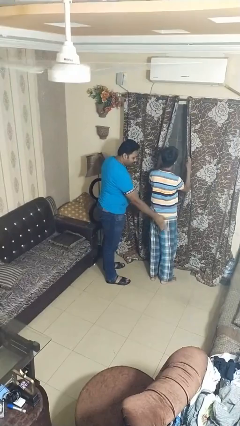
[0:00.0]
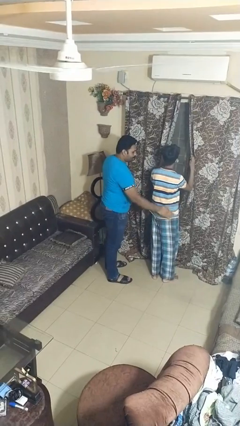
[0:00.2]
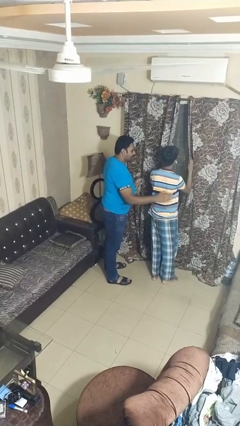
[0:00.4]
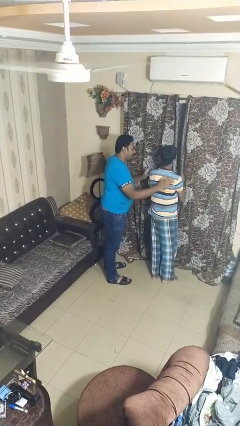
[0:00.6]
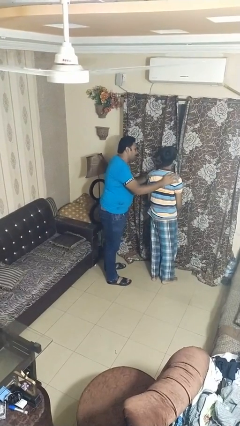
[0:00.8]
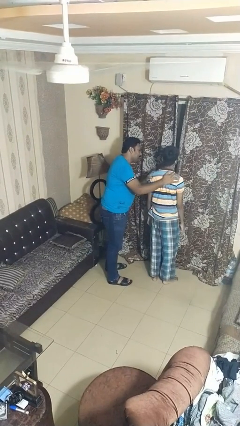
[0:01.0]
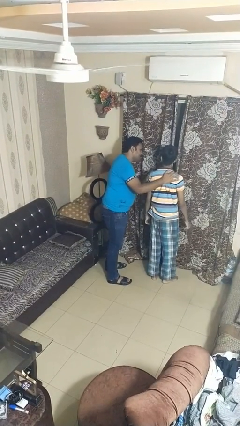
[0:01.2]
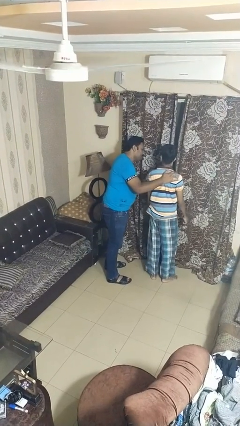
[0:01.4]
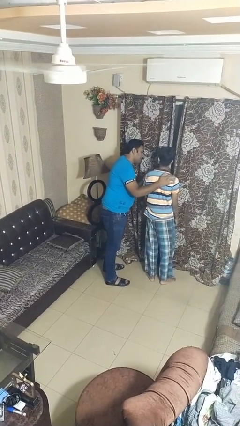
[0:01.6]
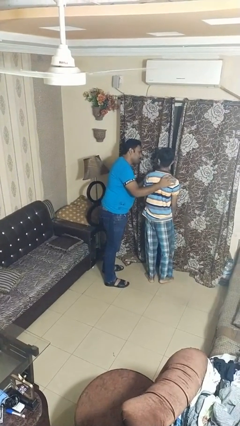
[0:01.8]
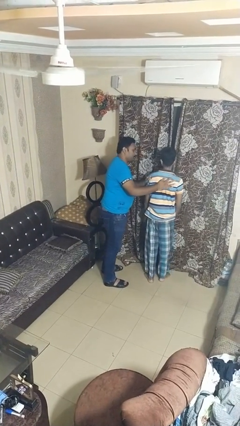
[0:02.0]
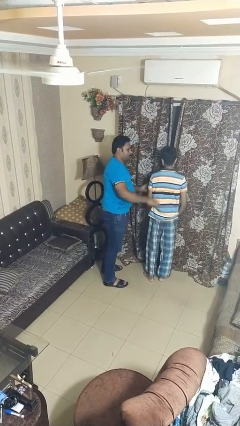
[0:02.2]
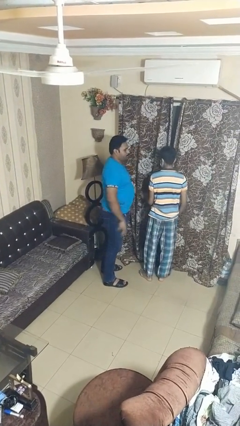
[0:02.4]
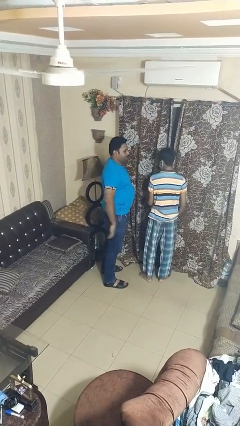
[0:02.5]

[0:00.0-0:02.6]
person bumps into person

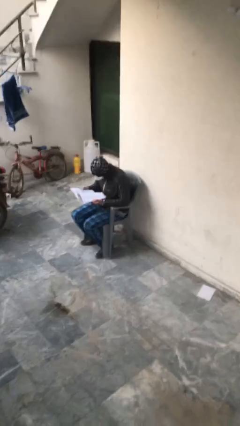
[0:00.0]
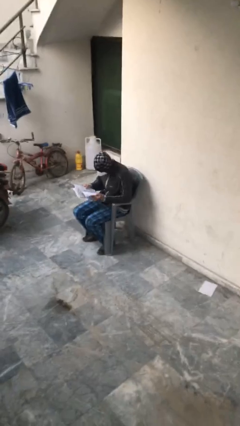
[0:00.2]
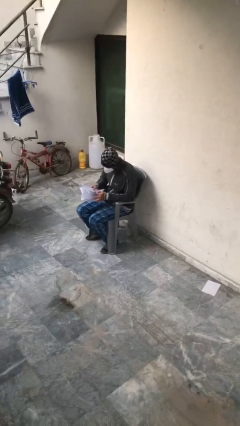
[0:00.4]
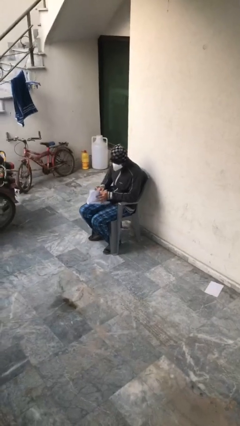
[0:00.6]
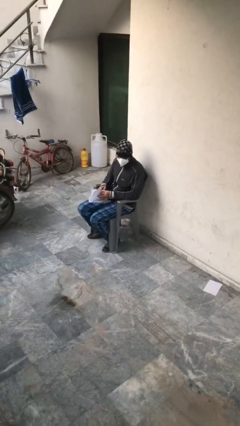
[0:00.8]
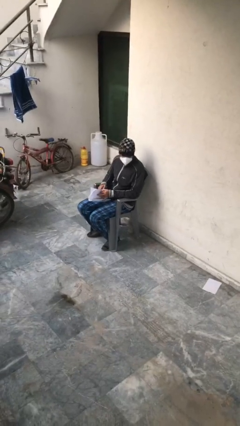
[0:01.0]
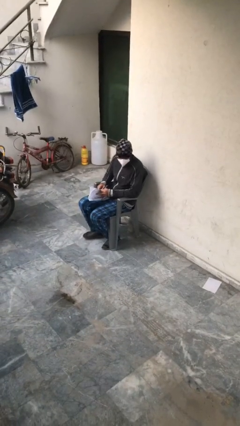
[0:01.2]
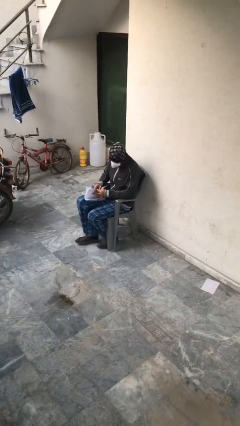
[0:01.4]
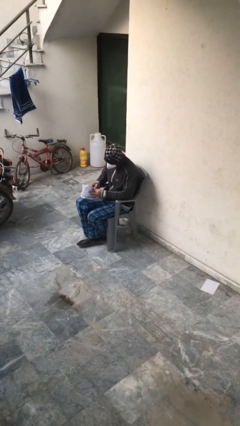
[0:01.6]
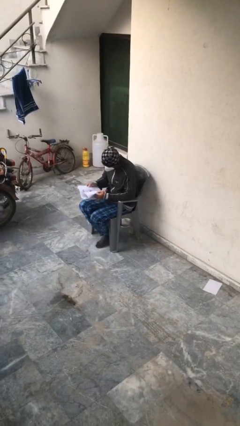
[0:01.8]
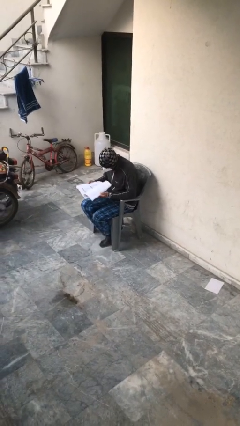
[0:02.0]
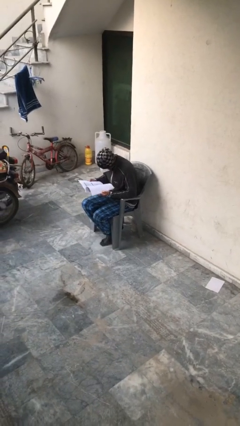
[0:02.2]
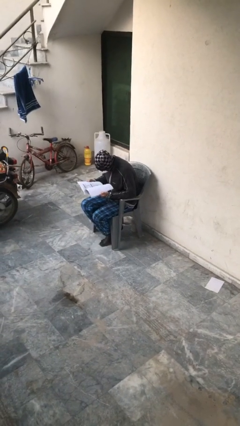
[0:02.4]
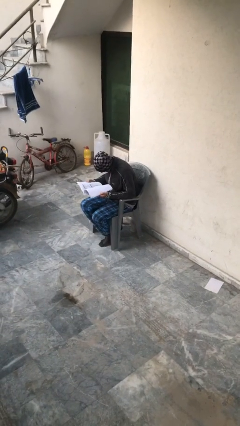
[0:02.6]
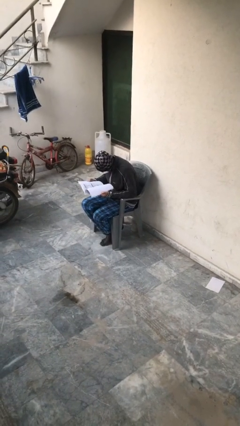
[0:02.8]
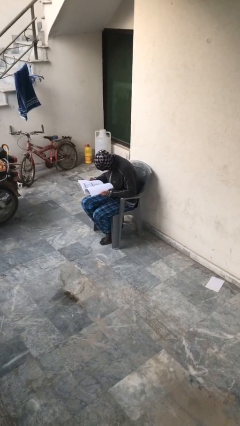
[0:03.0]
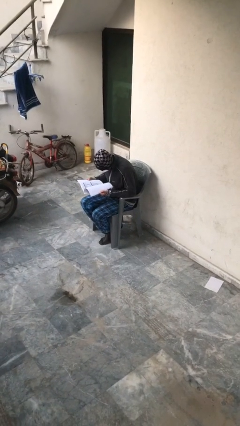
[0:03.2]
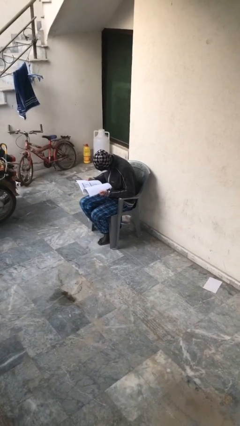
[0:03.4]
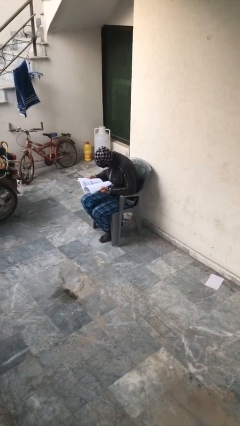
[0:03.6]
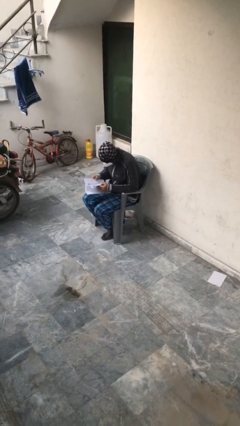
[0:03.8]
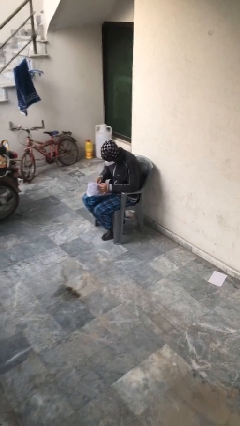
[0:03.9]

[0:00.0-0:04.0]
person reads document

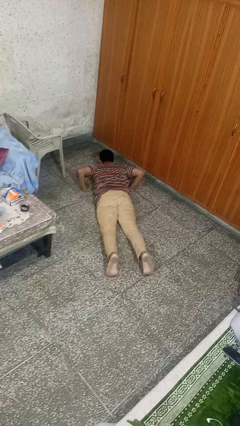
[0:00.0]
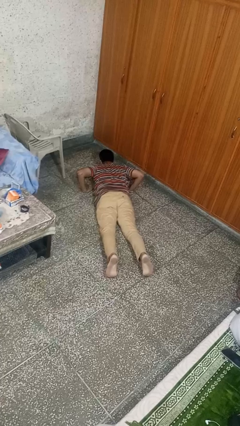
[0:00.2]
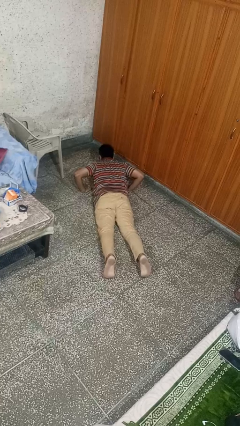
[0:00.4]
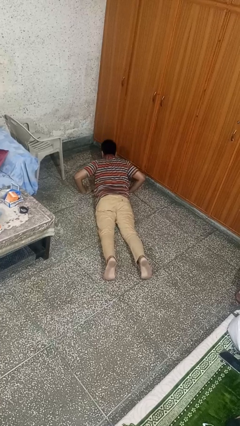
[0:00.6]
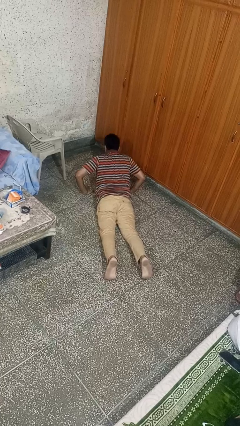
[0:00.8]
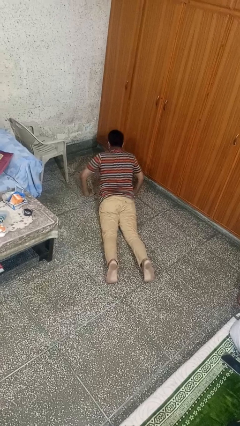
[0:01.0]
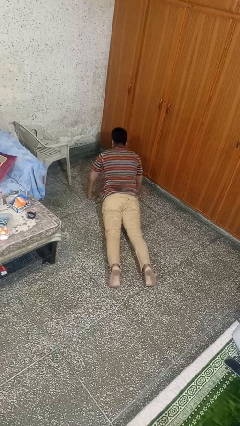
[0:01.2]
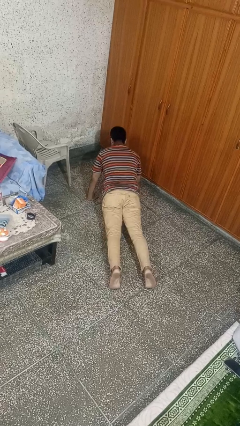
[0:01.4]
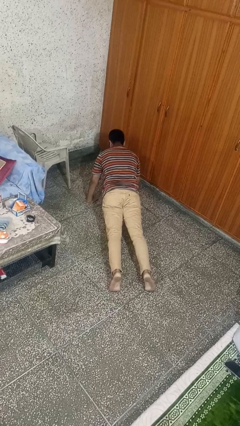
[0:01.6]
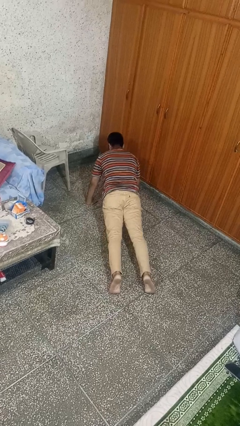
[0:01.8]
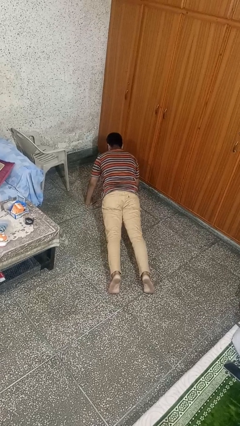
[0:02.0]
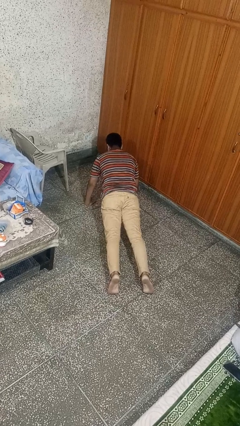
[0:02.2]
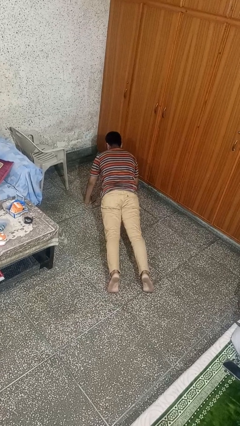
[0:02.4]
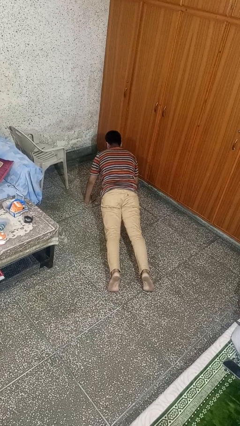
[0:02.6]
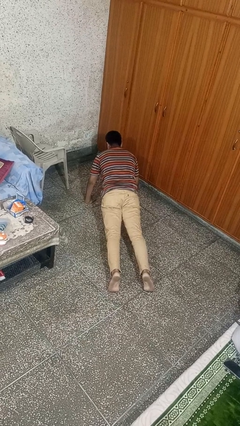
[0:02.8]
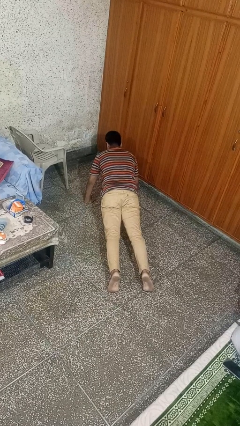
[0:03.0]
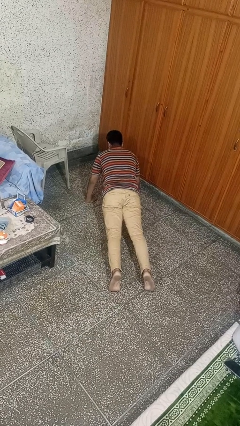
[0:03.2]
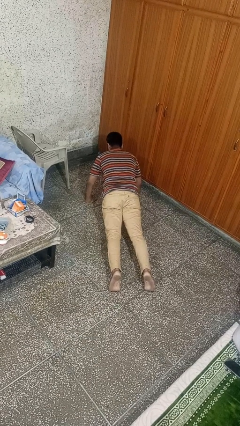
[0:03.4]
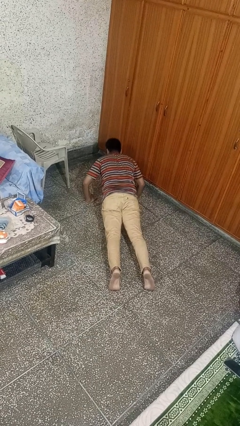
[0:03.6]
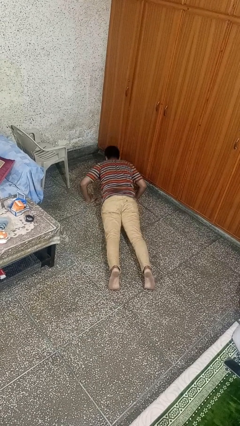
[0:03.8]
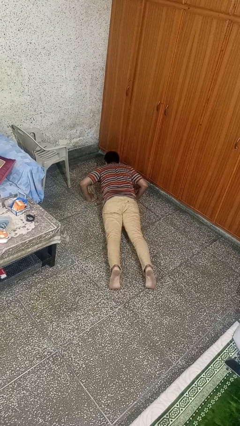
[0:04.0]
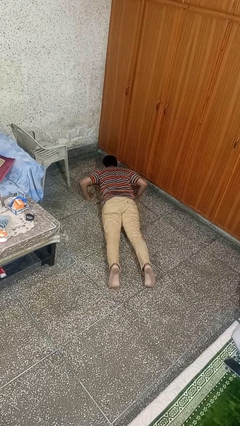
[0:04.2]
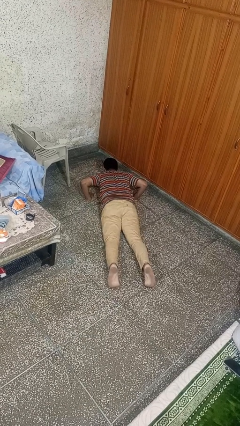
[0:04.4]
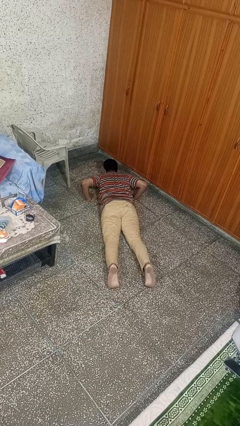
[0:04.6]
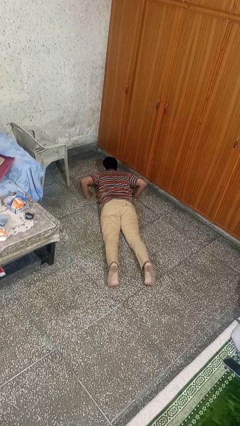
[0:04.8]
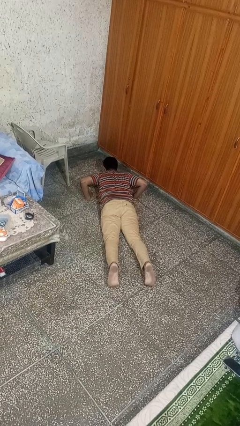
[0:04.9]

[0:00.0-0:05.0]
person exercises with pushup

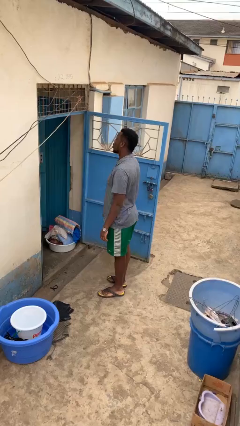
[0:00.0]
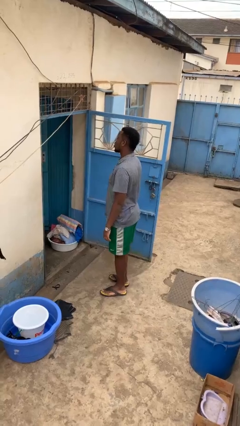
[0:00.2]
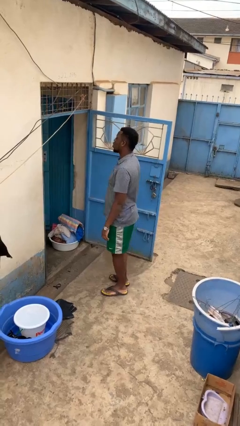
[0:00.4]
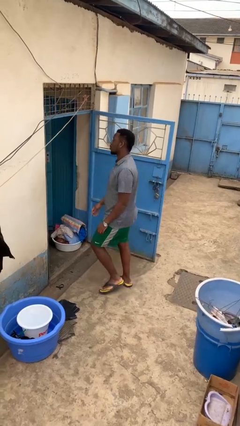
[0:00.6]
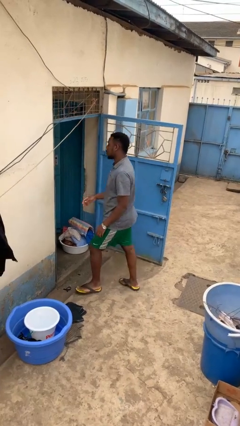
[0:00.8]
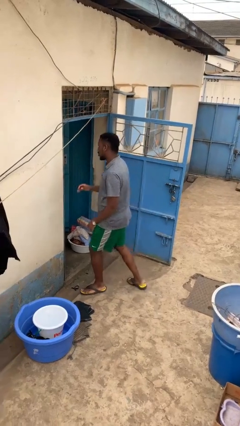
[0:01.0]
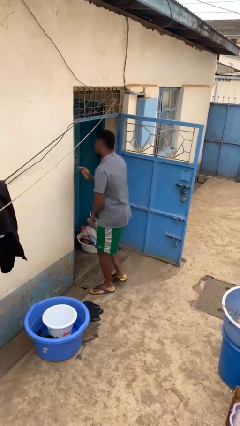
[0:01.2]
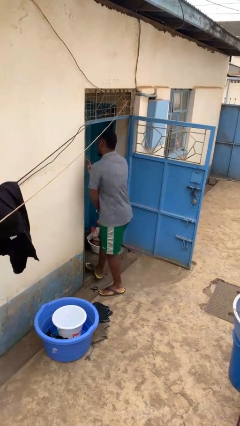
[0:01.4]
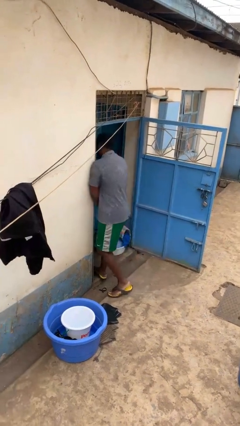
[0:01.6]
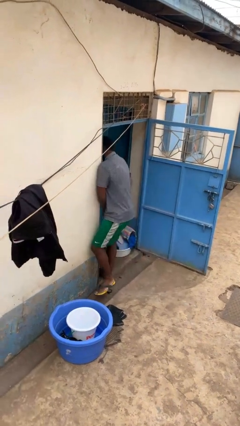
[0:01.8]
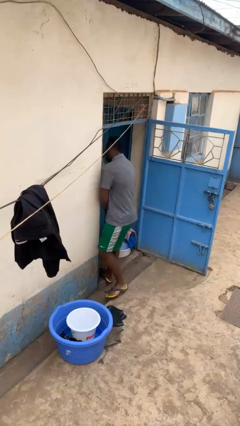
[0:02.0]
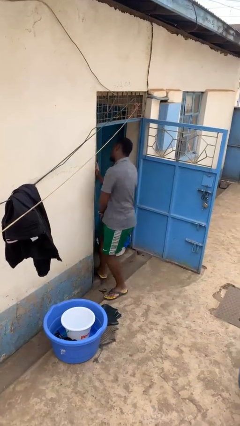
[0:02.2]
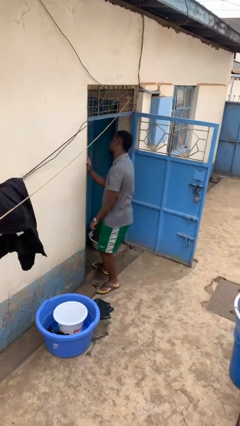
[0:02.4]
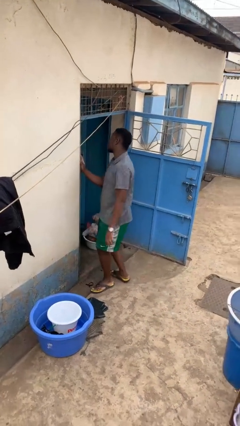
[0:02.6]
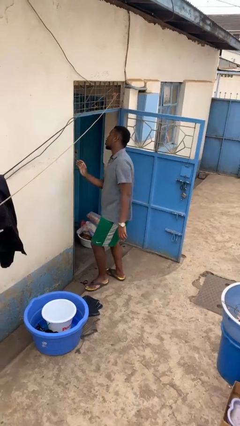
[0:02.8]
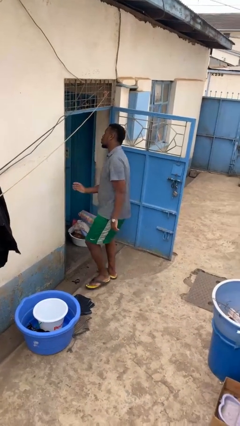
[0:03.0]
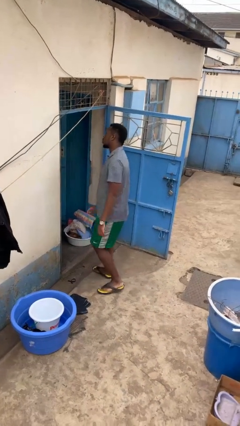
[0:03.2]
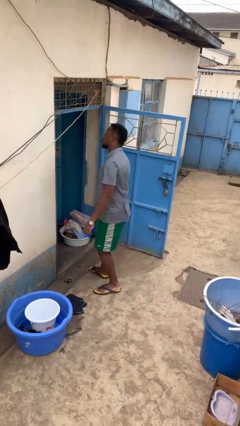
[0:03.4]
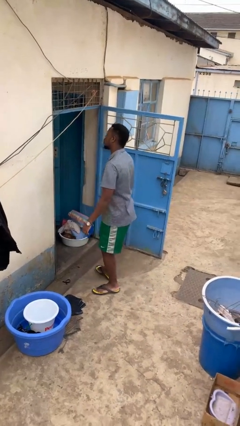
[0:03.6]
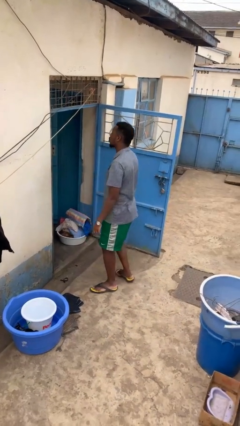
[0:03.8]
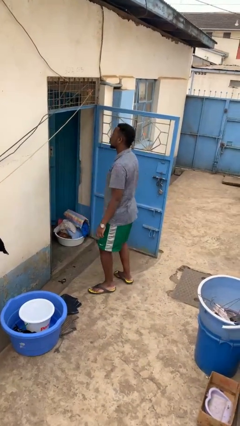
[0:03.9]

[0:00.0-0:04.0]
person bumps into wall

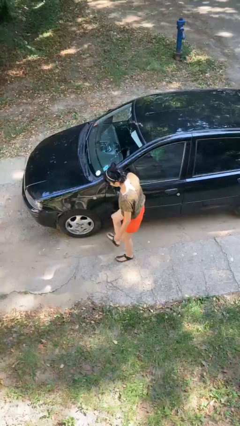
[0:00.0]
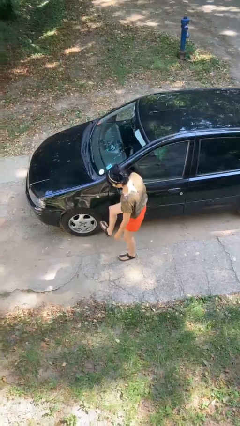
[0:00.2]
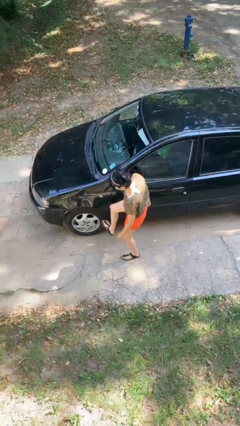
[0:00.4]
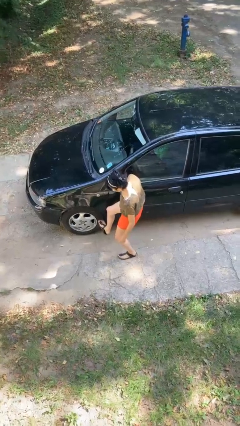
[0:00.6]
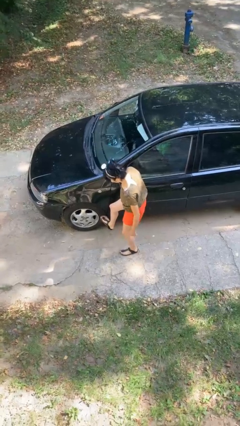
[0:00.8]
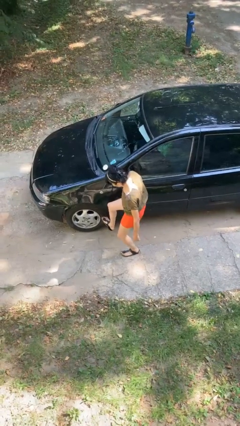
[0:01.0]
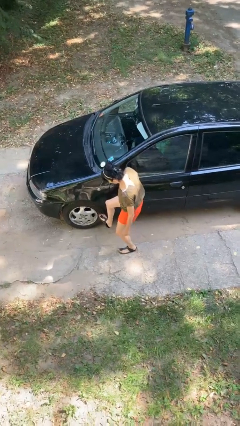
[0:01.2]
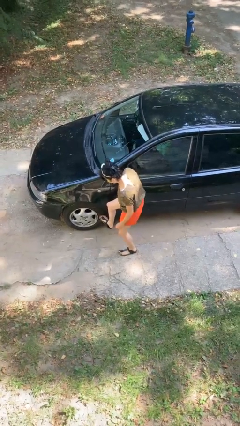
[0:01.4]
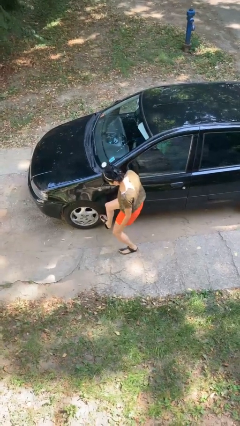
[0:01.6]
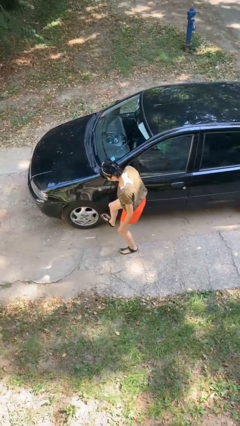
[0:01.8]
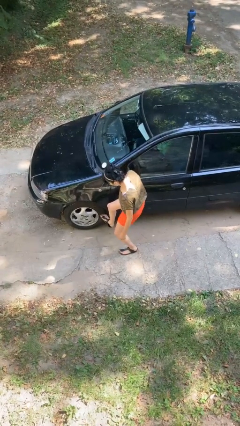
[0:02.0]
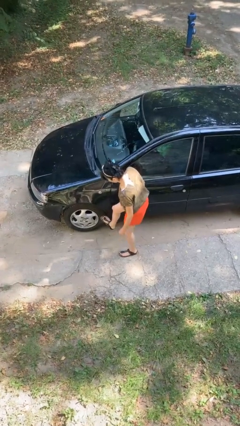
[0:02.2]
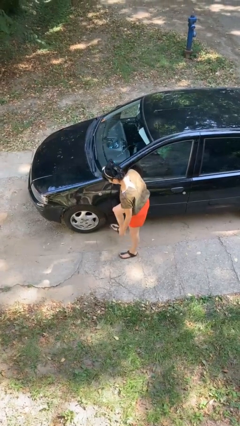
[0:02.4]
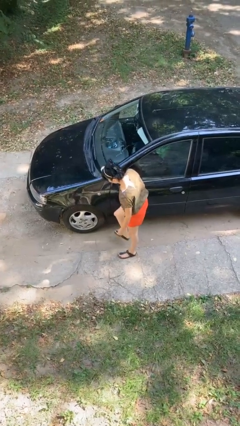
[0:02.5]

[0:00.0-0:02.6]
person kicks car tires
